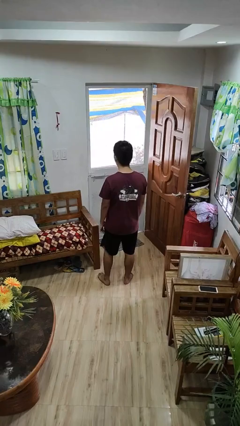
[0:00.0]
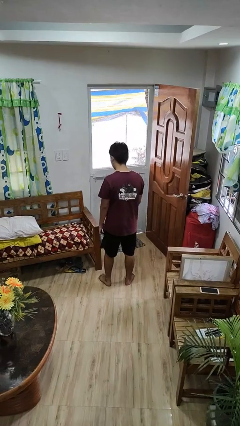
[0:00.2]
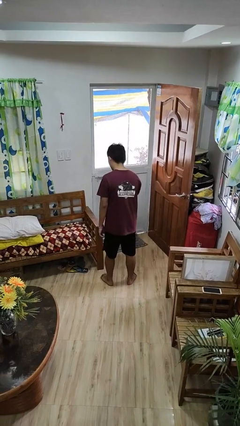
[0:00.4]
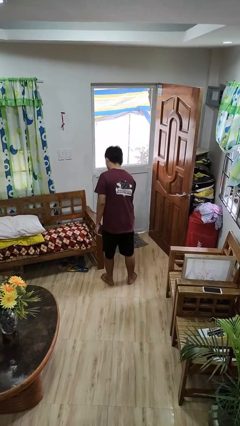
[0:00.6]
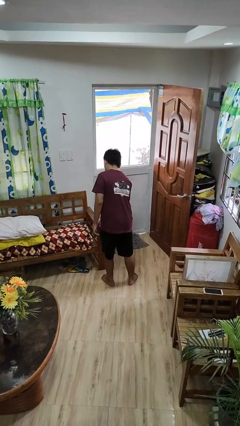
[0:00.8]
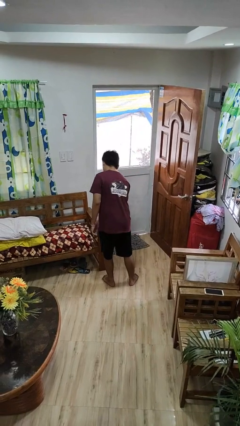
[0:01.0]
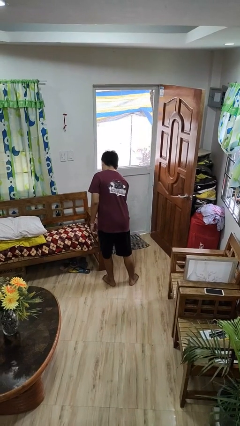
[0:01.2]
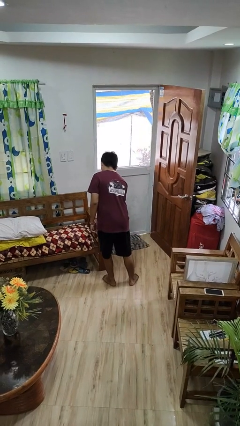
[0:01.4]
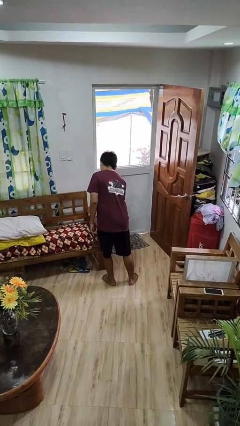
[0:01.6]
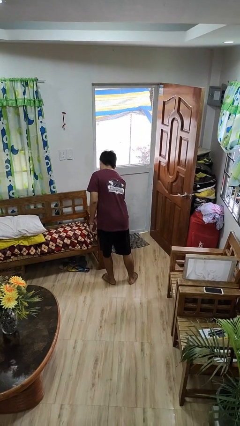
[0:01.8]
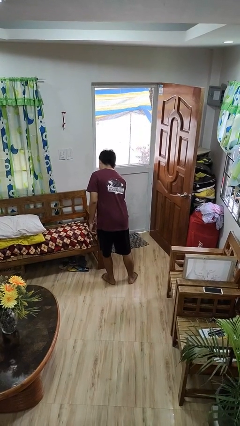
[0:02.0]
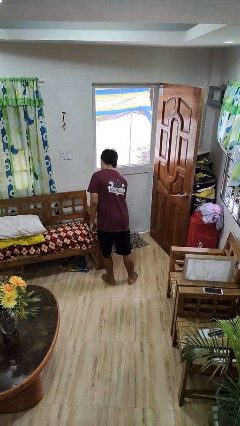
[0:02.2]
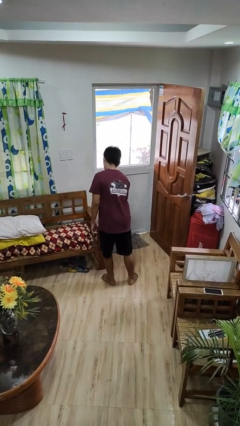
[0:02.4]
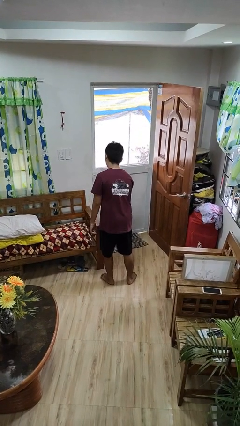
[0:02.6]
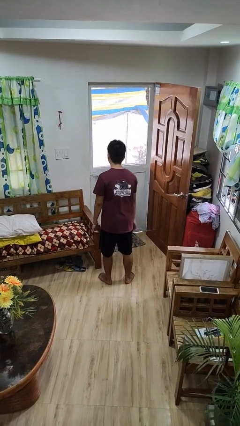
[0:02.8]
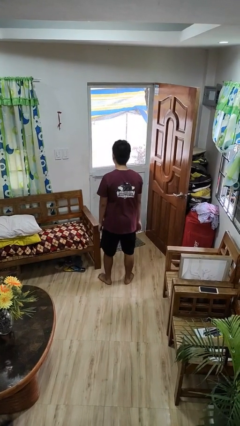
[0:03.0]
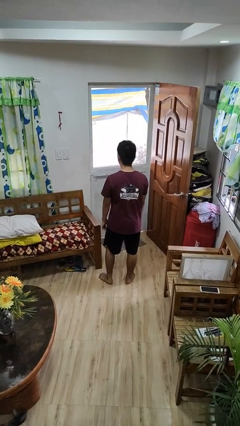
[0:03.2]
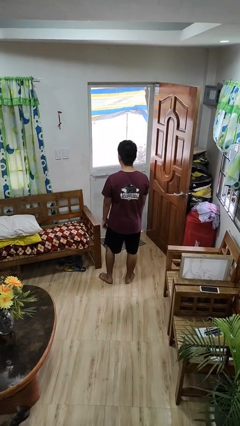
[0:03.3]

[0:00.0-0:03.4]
person taps object with finger

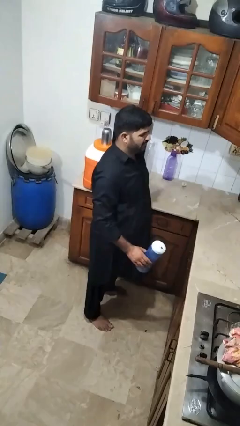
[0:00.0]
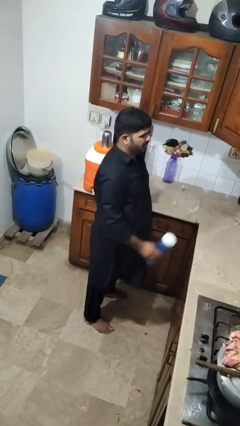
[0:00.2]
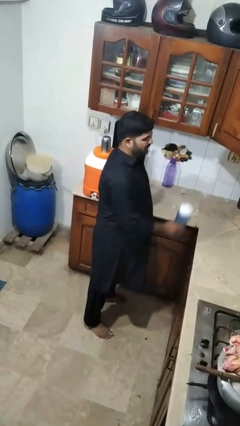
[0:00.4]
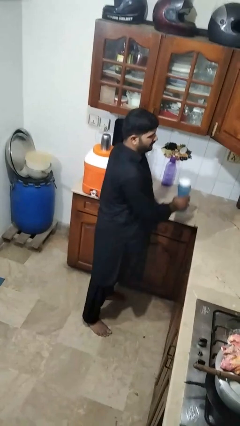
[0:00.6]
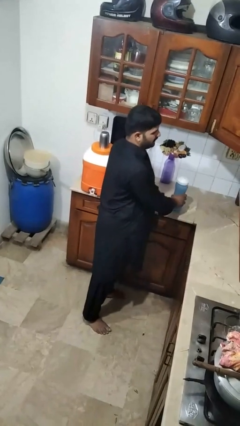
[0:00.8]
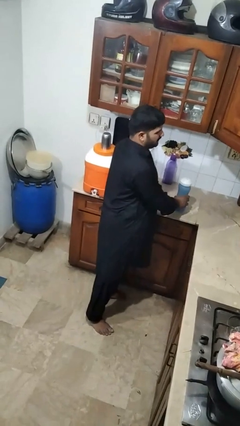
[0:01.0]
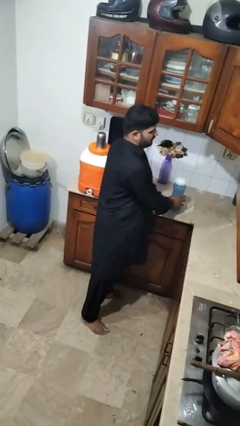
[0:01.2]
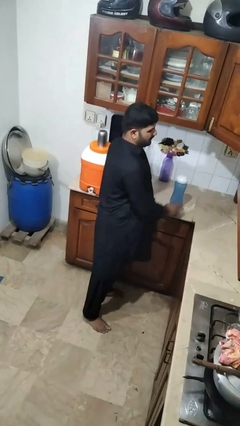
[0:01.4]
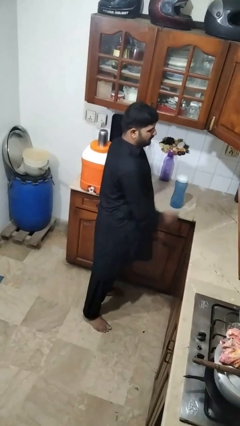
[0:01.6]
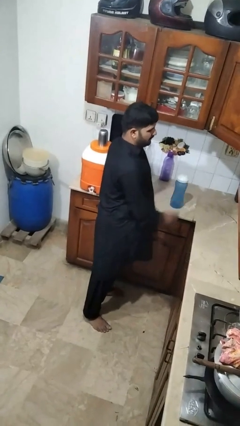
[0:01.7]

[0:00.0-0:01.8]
person puts down object on countertop

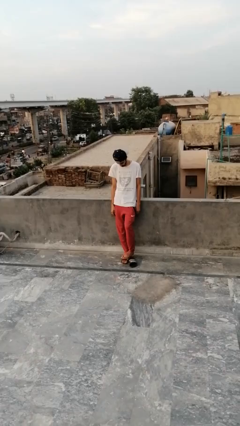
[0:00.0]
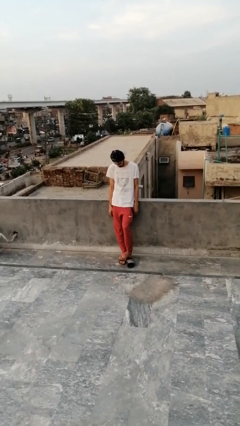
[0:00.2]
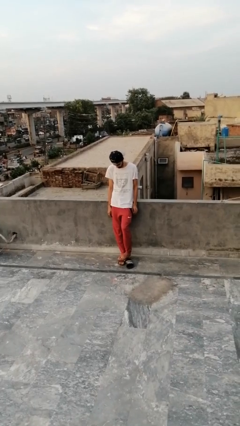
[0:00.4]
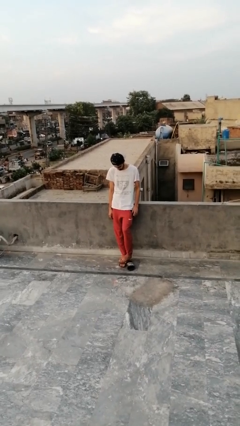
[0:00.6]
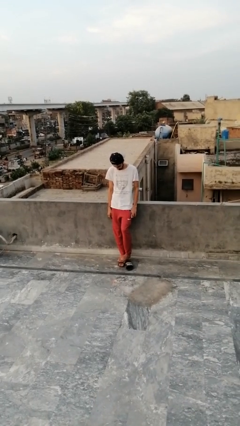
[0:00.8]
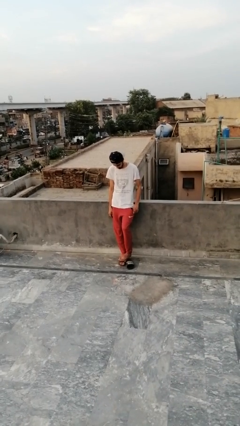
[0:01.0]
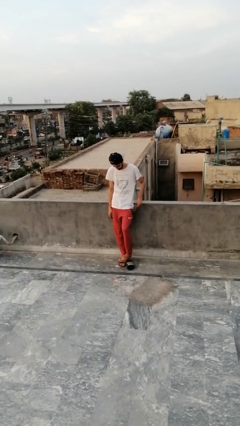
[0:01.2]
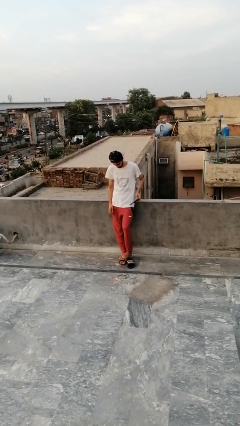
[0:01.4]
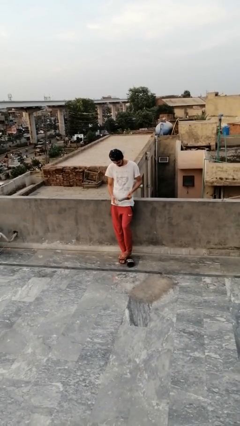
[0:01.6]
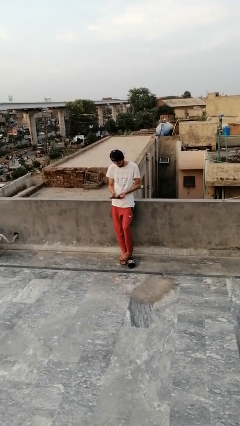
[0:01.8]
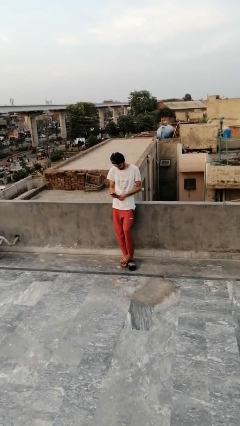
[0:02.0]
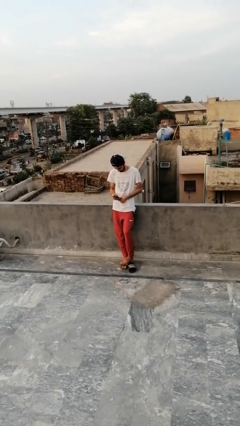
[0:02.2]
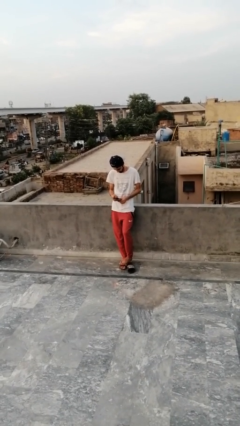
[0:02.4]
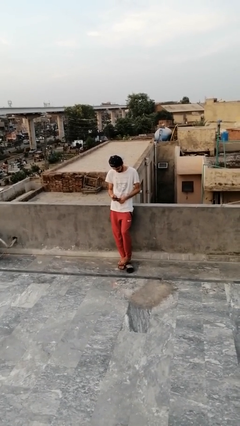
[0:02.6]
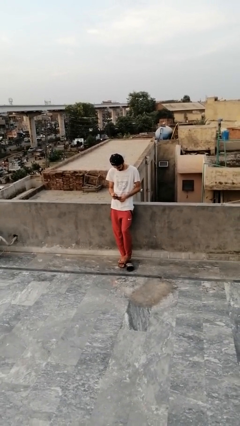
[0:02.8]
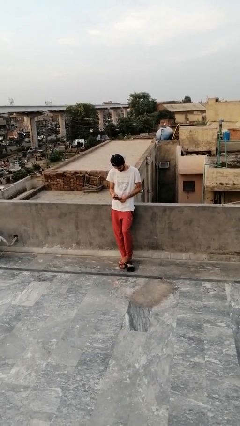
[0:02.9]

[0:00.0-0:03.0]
person takes phone from pocket

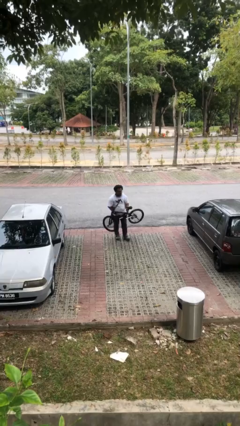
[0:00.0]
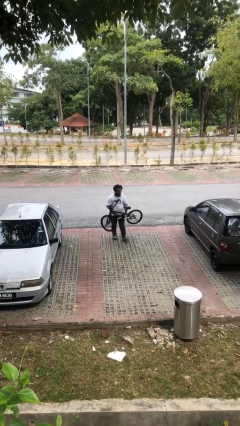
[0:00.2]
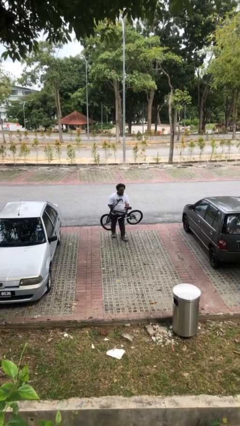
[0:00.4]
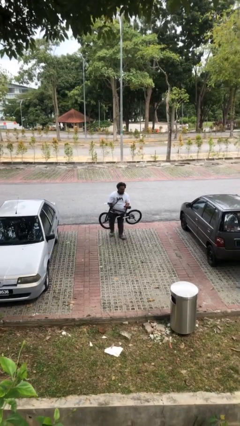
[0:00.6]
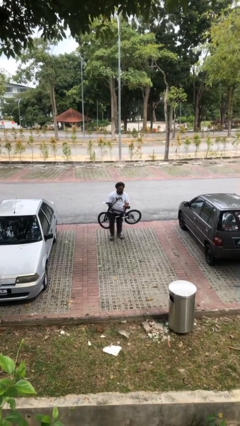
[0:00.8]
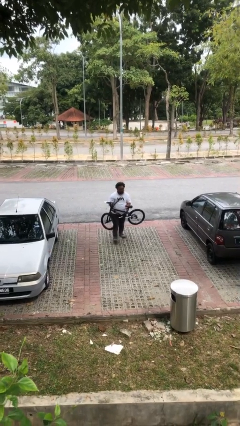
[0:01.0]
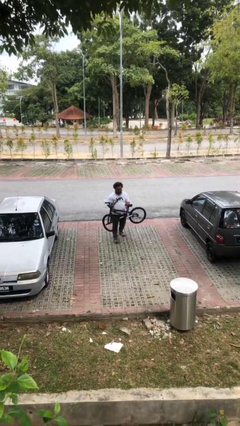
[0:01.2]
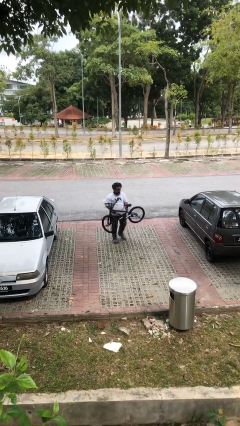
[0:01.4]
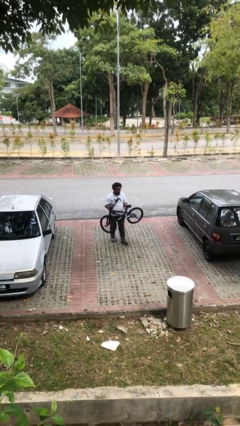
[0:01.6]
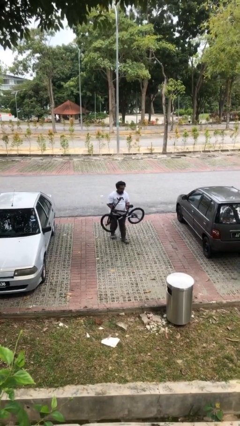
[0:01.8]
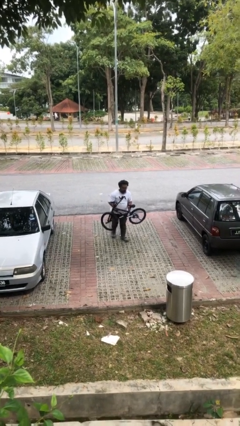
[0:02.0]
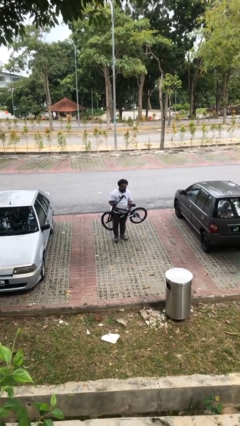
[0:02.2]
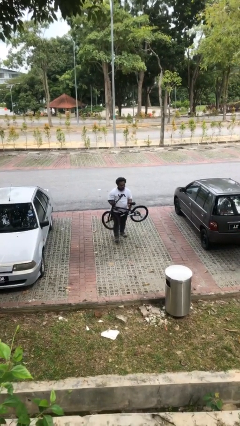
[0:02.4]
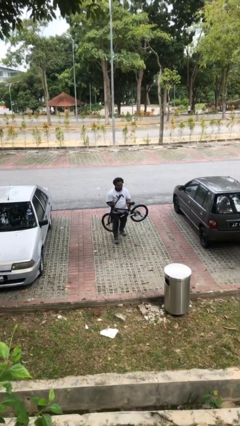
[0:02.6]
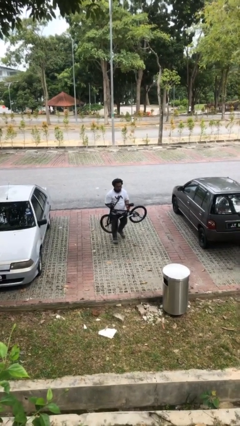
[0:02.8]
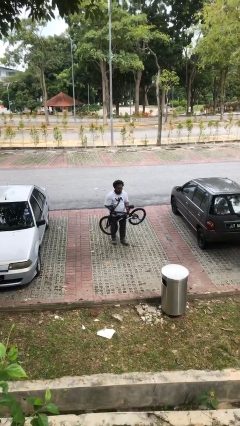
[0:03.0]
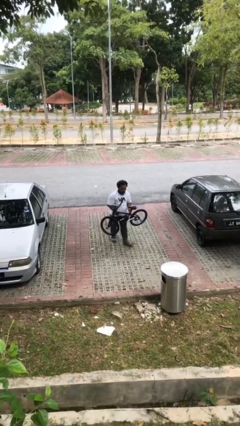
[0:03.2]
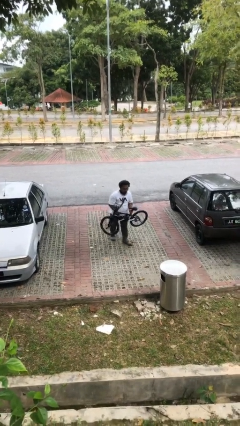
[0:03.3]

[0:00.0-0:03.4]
person carries heavy object

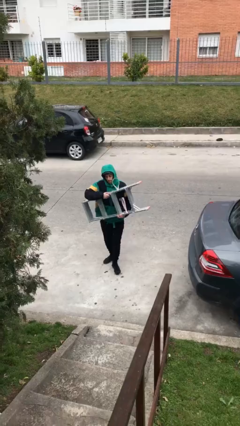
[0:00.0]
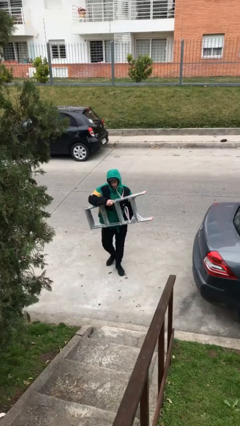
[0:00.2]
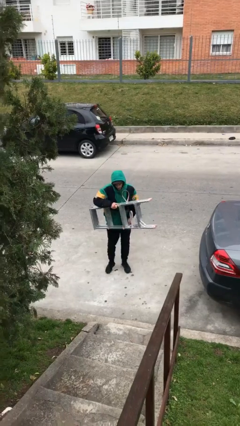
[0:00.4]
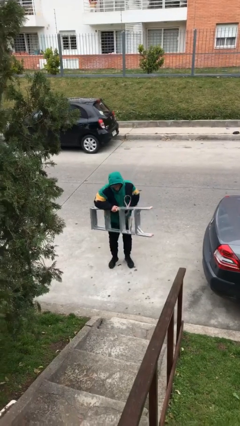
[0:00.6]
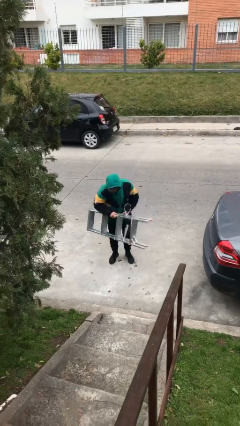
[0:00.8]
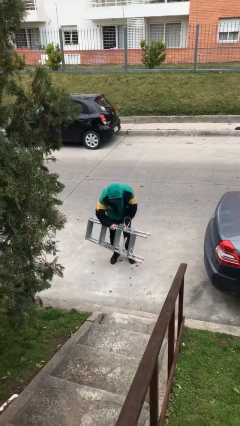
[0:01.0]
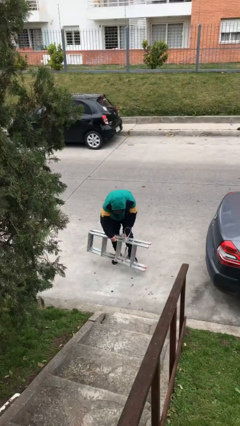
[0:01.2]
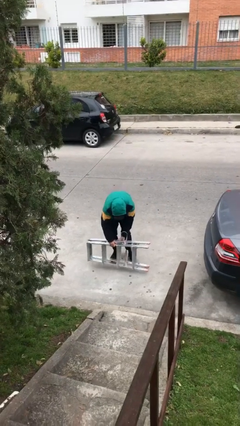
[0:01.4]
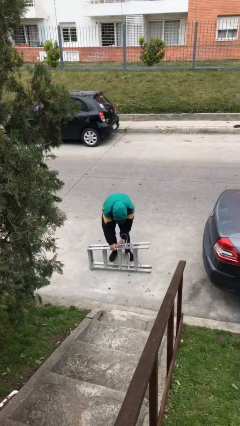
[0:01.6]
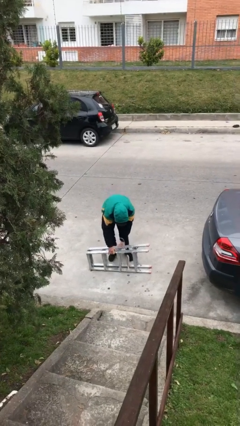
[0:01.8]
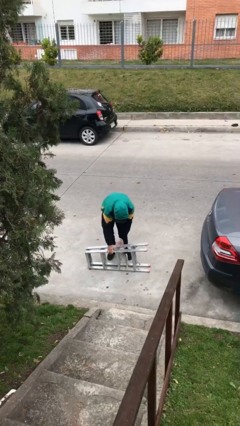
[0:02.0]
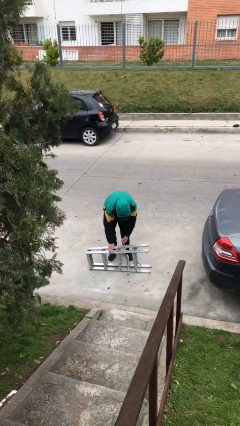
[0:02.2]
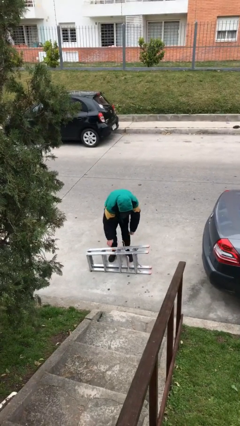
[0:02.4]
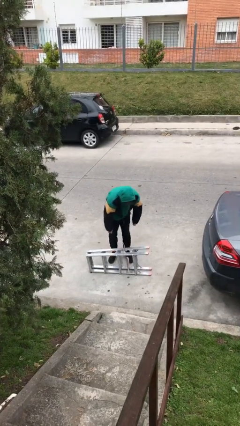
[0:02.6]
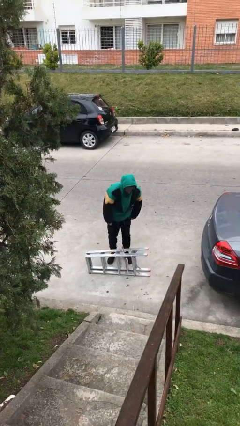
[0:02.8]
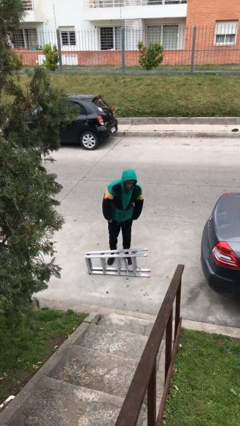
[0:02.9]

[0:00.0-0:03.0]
person puts down object on floor

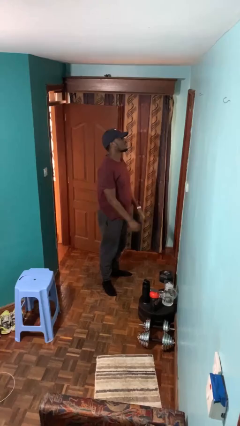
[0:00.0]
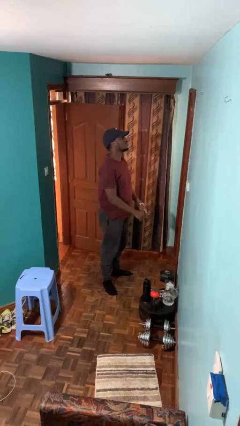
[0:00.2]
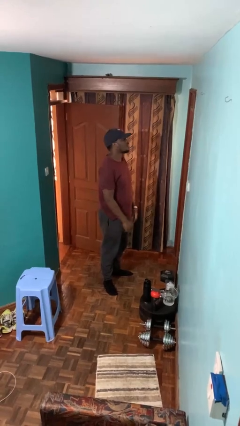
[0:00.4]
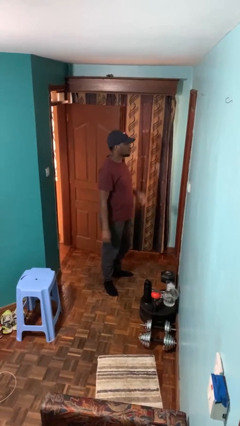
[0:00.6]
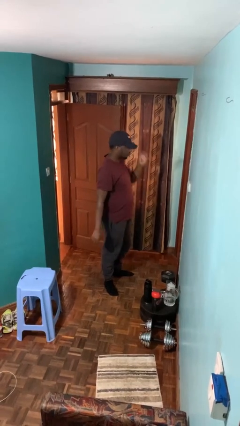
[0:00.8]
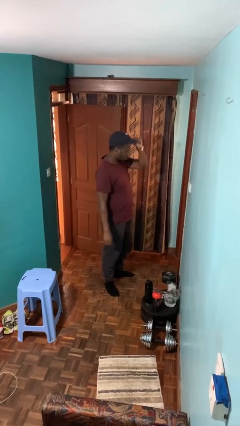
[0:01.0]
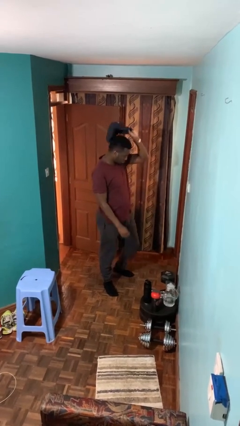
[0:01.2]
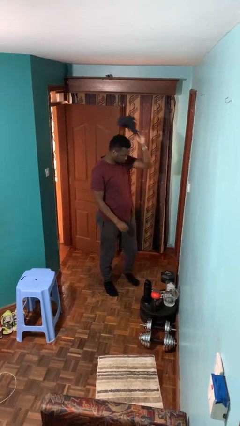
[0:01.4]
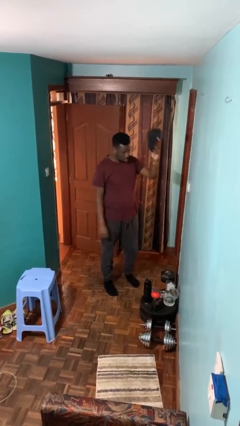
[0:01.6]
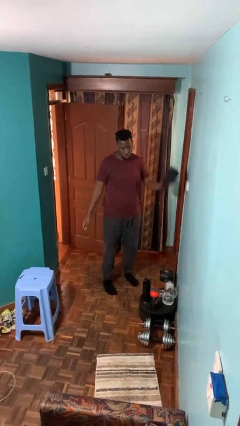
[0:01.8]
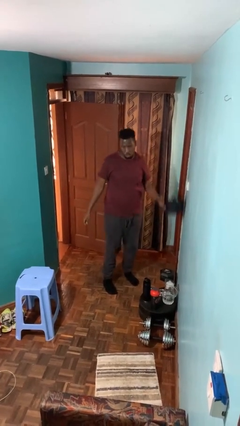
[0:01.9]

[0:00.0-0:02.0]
person takes off hat

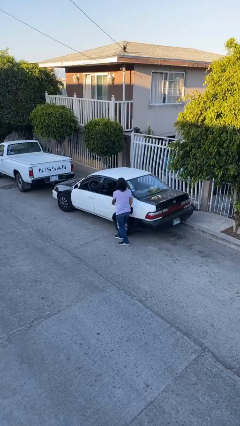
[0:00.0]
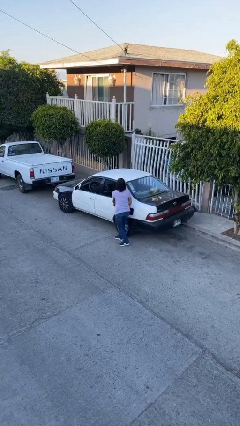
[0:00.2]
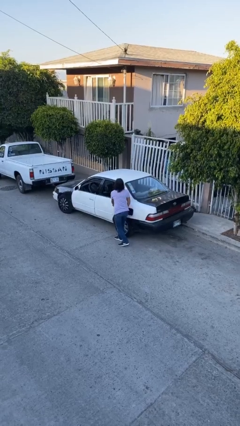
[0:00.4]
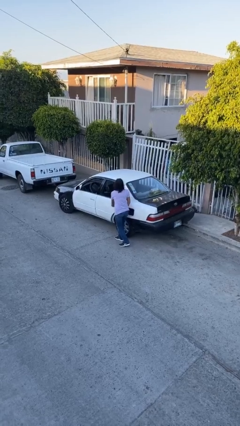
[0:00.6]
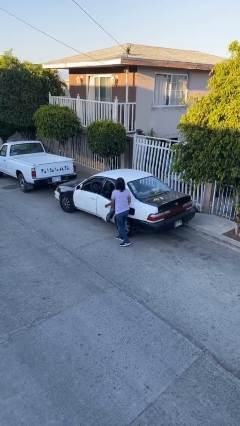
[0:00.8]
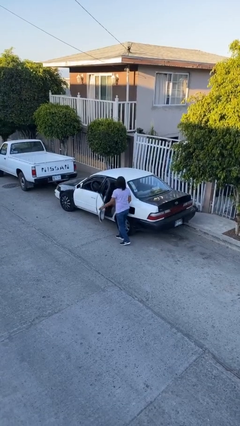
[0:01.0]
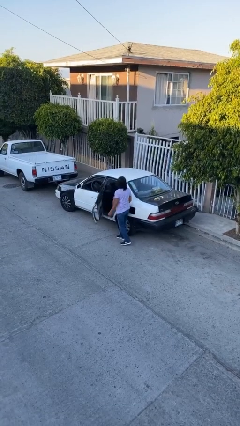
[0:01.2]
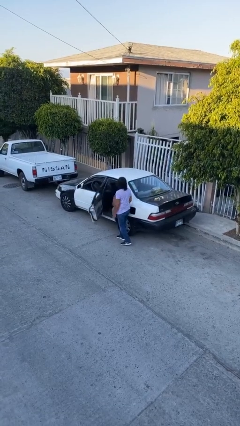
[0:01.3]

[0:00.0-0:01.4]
person opens car door
